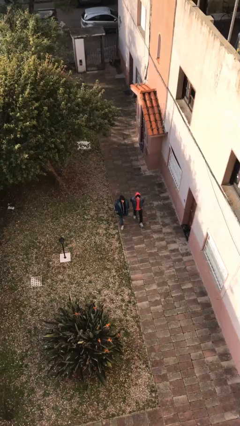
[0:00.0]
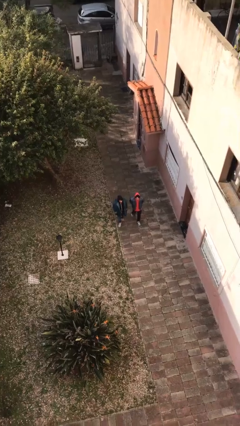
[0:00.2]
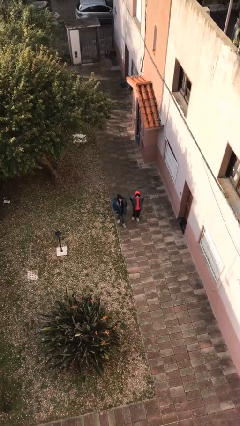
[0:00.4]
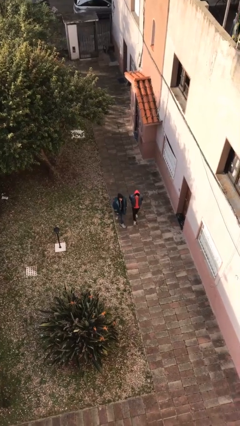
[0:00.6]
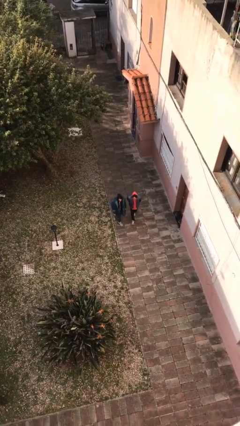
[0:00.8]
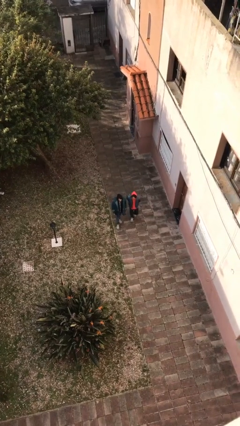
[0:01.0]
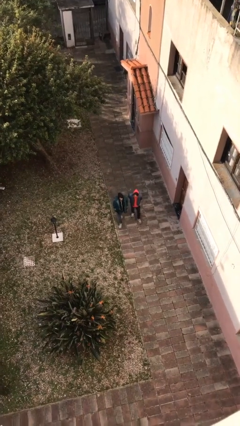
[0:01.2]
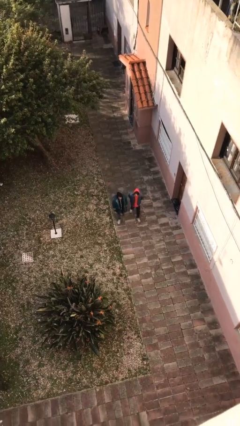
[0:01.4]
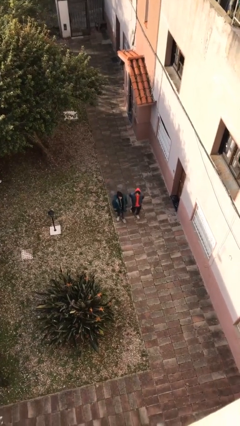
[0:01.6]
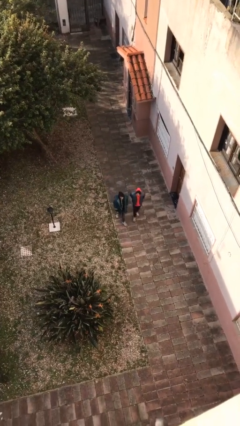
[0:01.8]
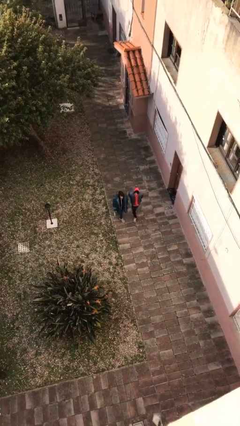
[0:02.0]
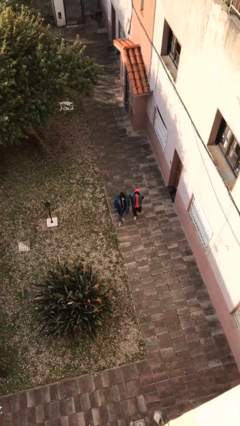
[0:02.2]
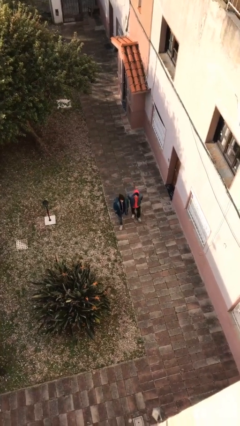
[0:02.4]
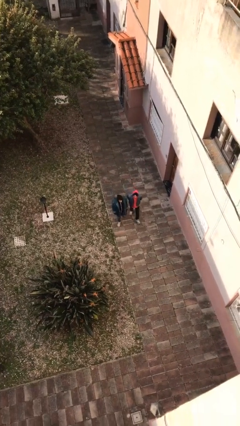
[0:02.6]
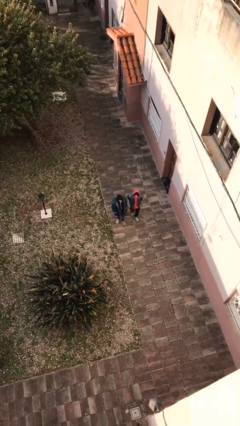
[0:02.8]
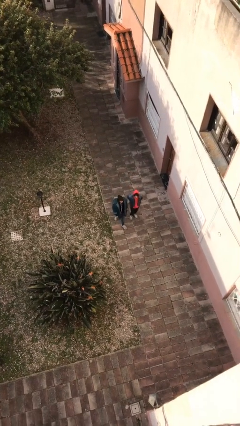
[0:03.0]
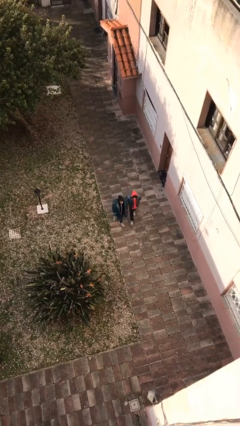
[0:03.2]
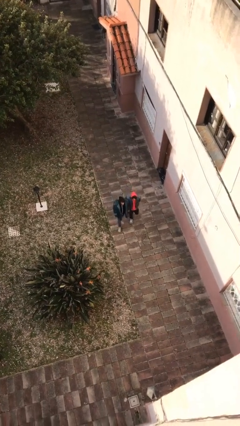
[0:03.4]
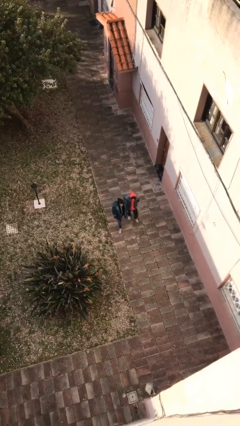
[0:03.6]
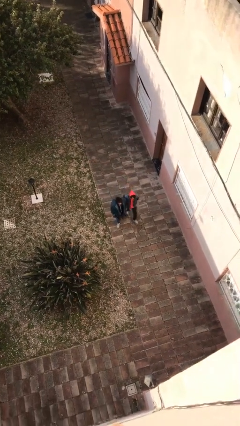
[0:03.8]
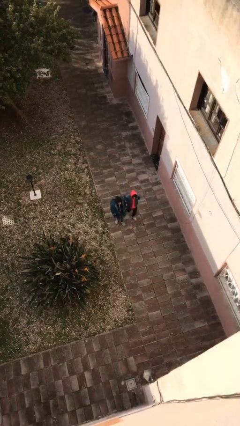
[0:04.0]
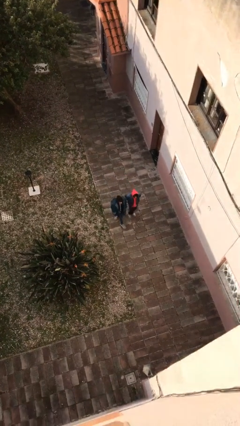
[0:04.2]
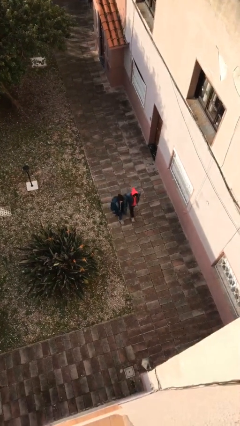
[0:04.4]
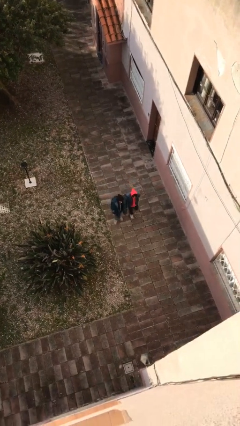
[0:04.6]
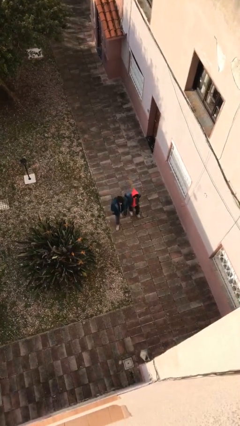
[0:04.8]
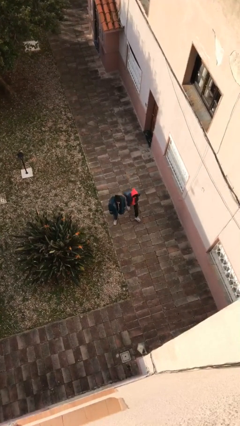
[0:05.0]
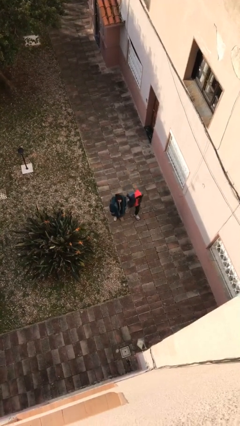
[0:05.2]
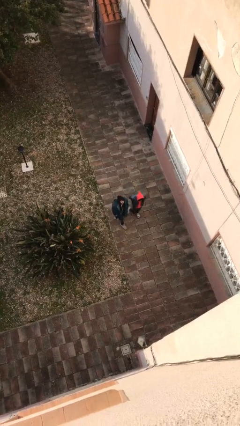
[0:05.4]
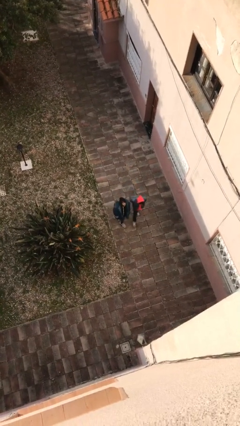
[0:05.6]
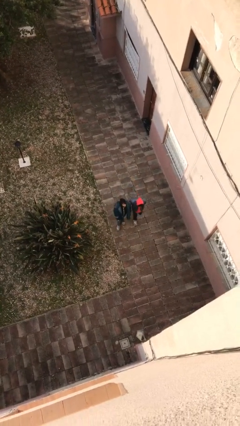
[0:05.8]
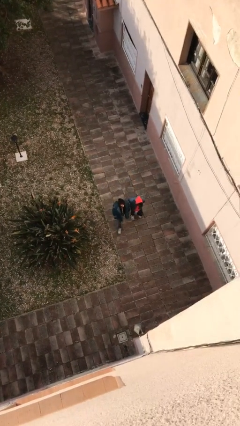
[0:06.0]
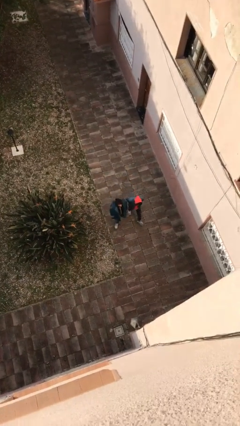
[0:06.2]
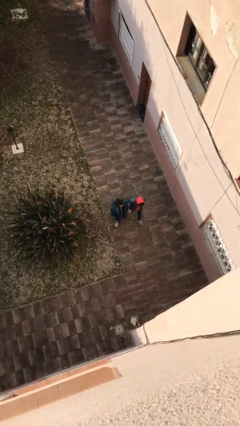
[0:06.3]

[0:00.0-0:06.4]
person talks to person

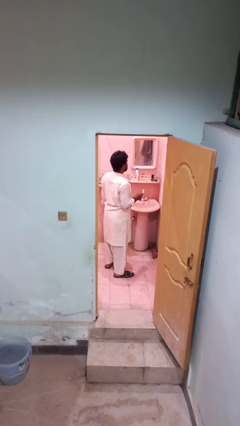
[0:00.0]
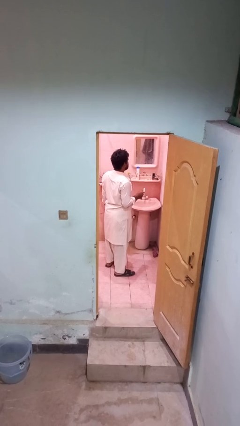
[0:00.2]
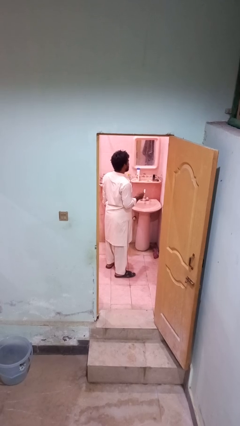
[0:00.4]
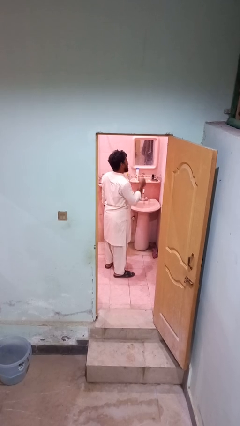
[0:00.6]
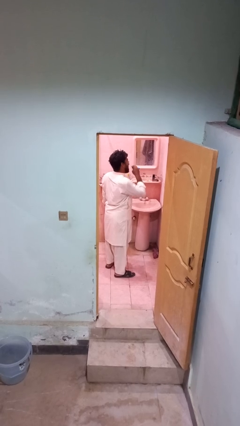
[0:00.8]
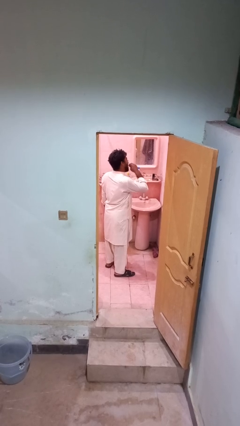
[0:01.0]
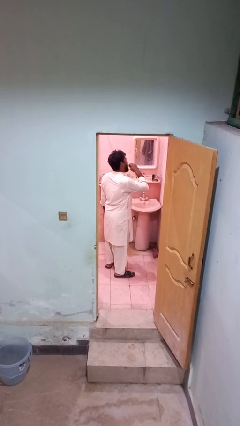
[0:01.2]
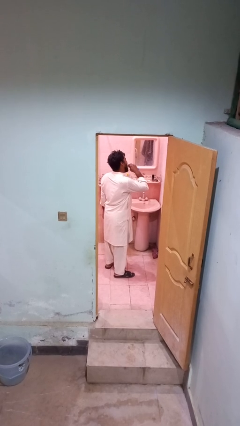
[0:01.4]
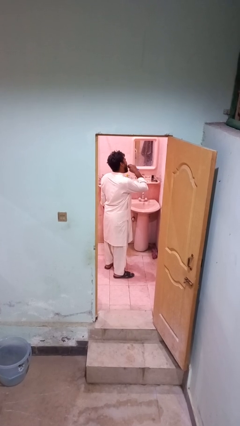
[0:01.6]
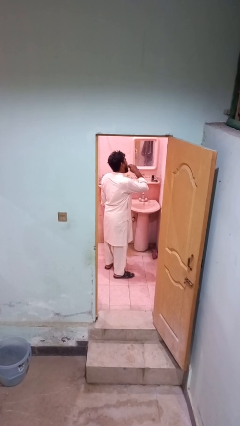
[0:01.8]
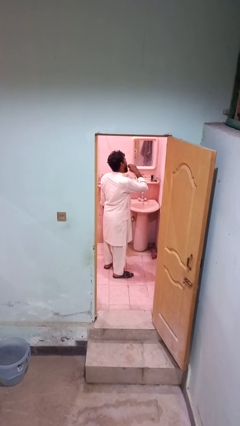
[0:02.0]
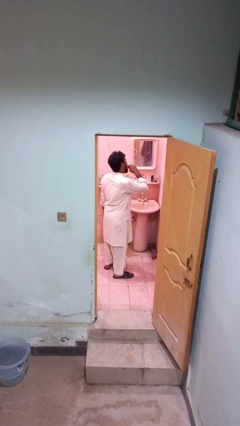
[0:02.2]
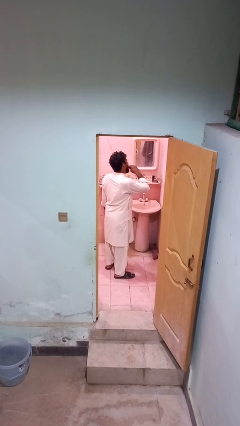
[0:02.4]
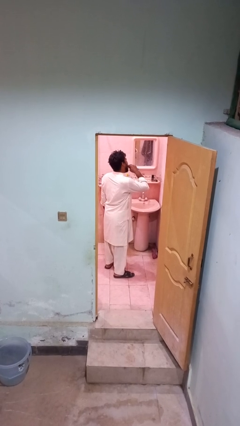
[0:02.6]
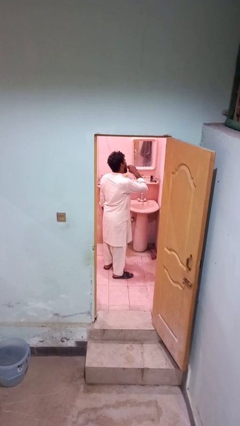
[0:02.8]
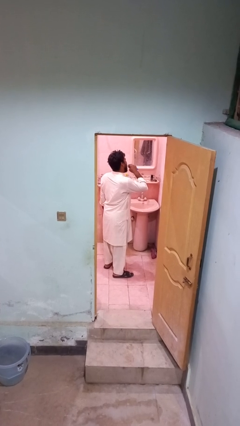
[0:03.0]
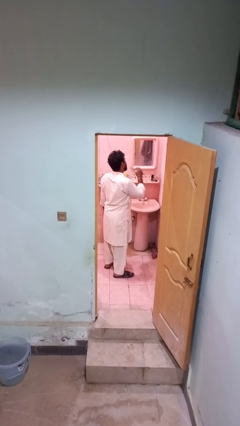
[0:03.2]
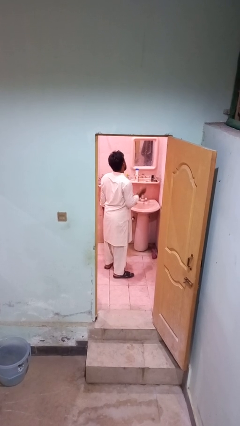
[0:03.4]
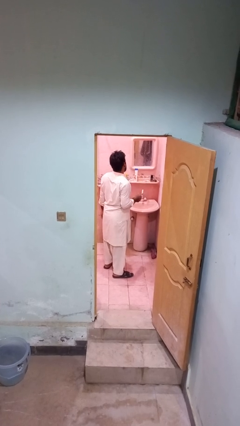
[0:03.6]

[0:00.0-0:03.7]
person flosses

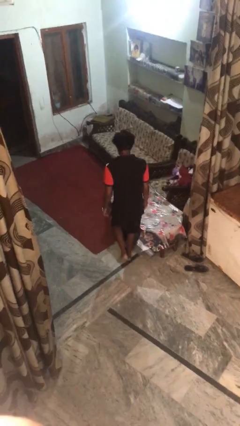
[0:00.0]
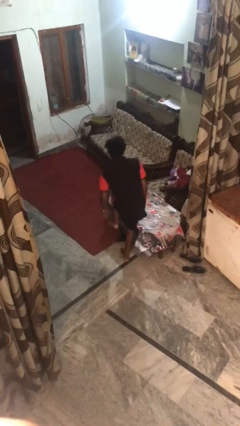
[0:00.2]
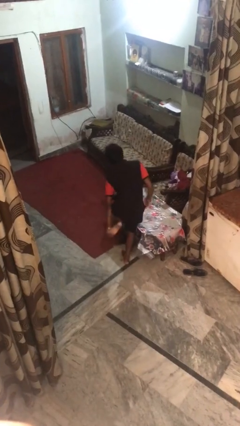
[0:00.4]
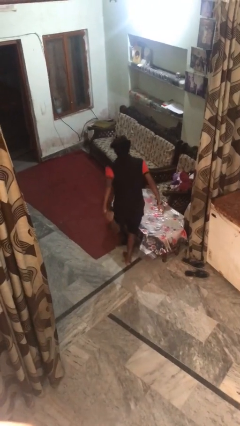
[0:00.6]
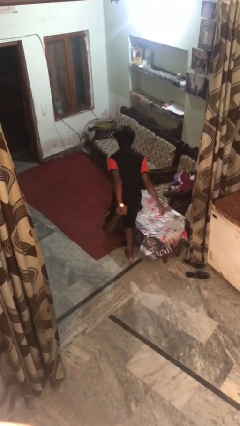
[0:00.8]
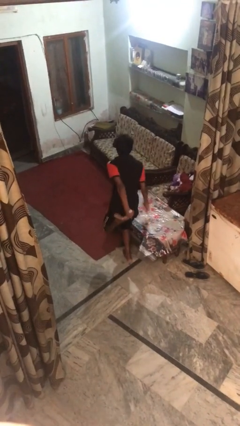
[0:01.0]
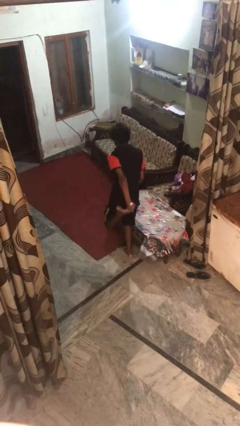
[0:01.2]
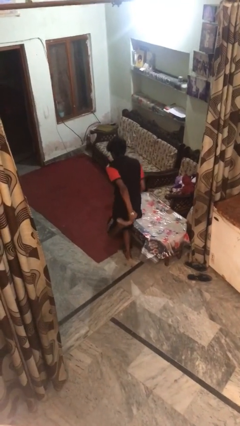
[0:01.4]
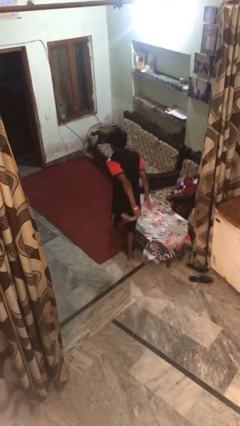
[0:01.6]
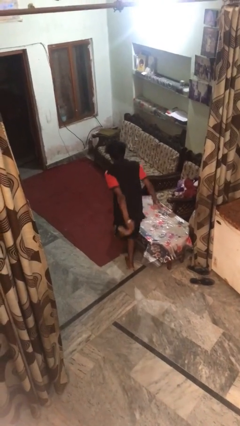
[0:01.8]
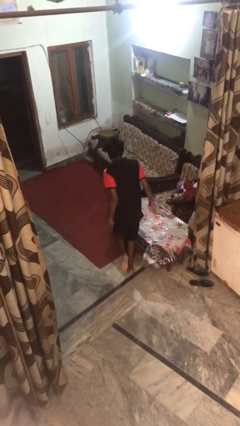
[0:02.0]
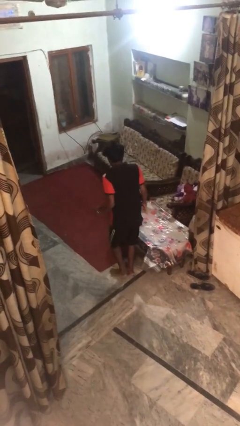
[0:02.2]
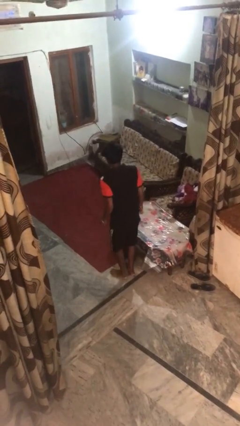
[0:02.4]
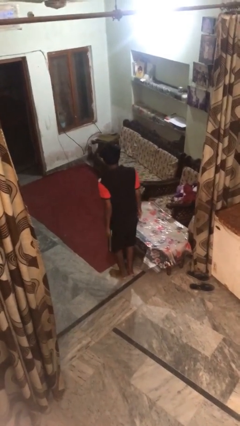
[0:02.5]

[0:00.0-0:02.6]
person stubs toe

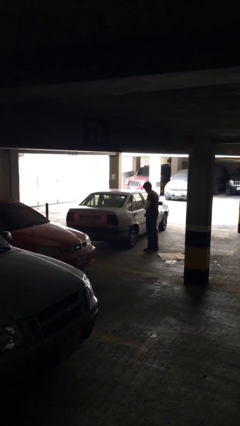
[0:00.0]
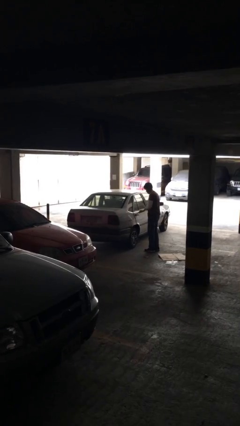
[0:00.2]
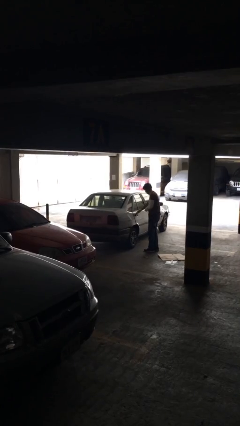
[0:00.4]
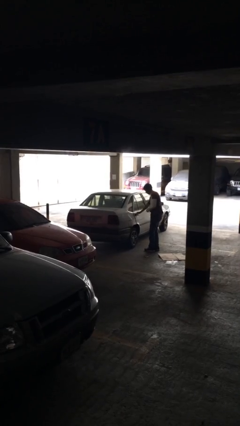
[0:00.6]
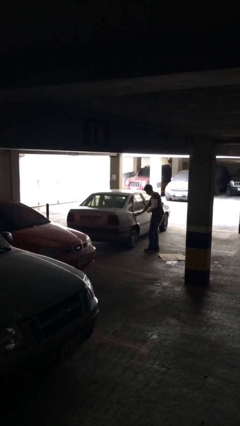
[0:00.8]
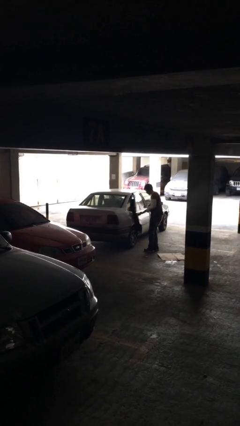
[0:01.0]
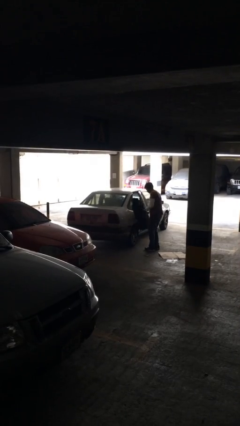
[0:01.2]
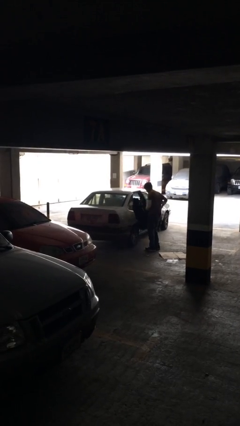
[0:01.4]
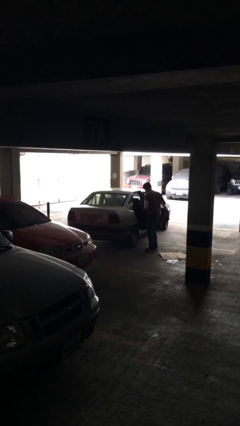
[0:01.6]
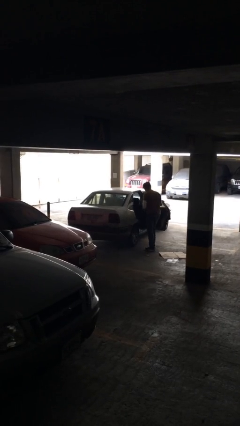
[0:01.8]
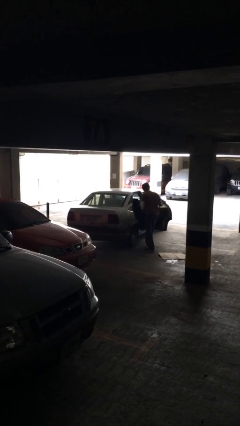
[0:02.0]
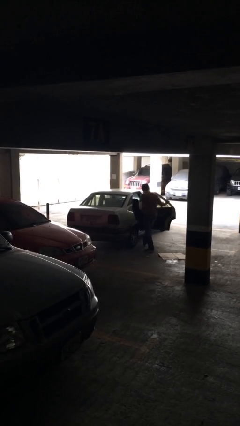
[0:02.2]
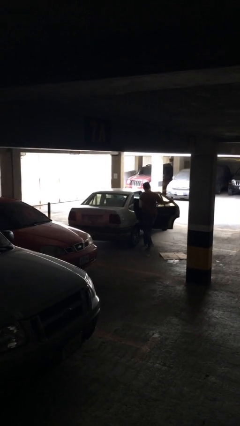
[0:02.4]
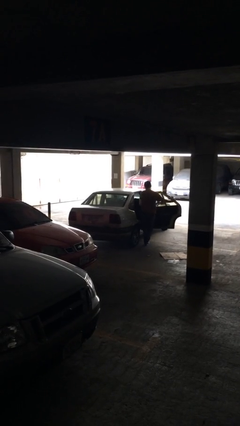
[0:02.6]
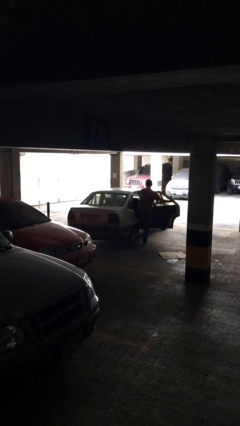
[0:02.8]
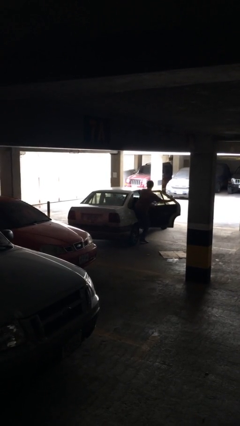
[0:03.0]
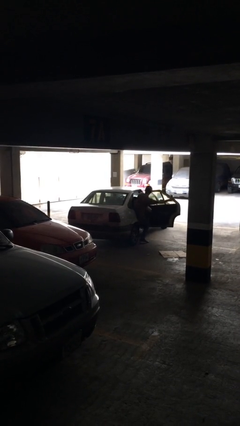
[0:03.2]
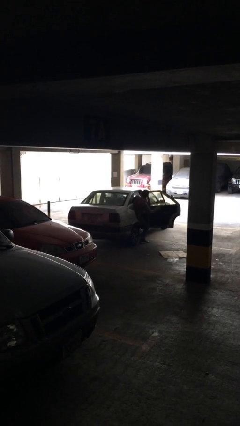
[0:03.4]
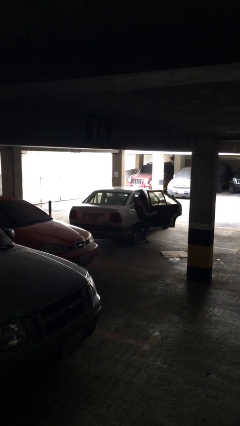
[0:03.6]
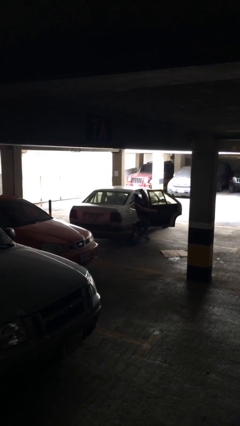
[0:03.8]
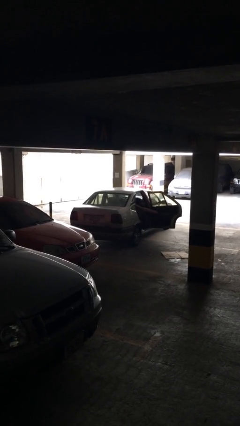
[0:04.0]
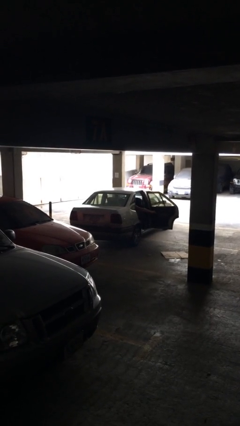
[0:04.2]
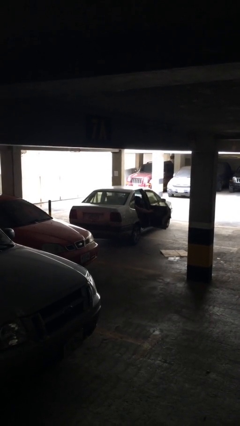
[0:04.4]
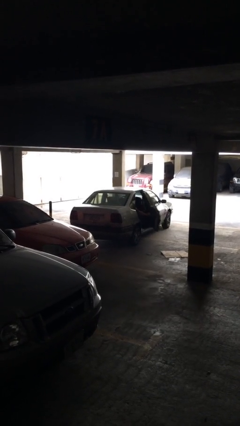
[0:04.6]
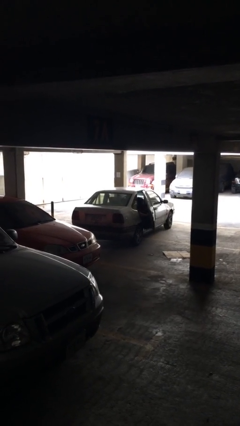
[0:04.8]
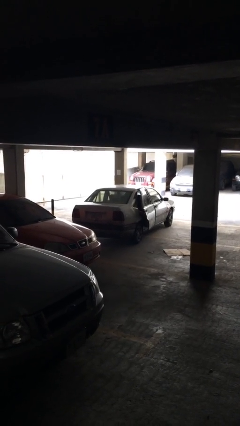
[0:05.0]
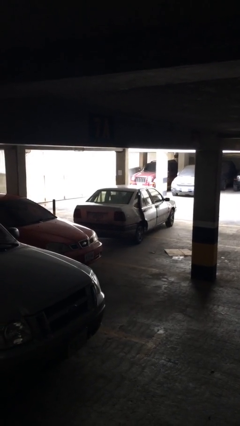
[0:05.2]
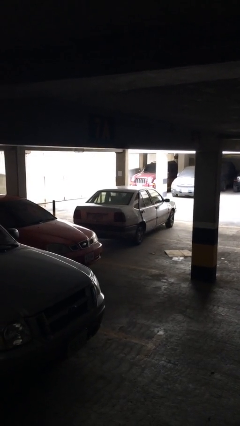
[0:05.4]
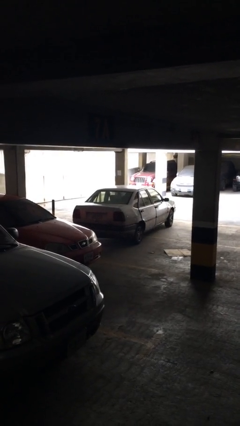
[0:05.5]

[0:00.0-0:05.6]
car picks up person
